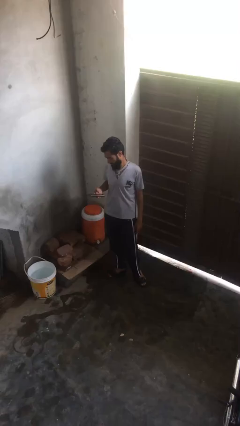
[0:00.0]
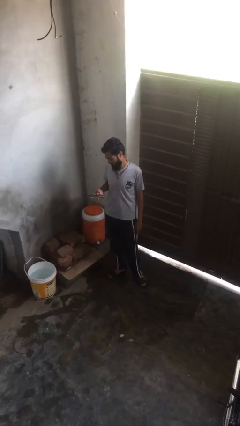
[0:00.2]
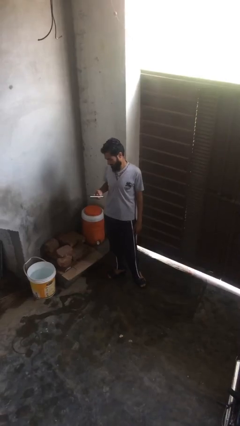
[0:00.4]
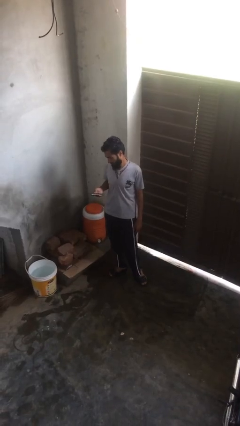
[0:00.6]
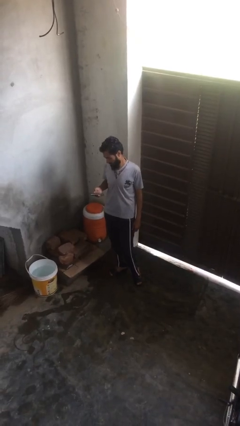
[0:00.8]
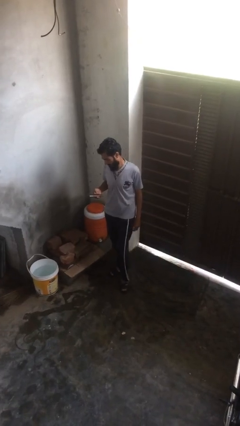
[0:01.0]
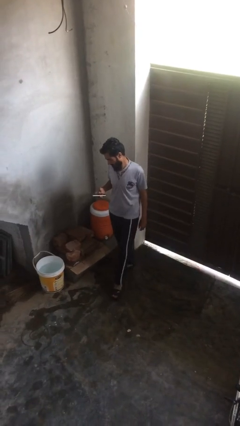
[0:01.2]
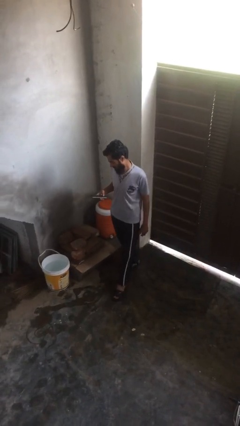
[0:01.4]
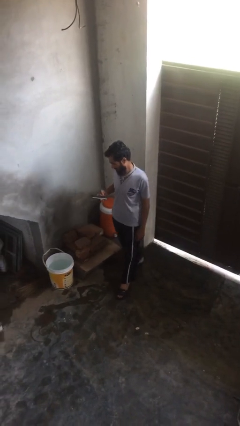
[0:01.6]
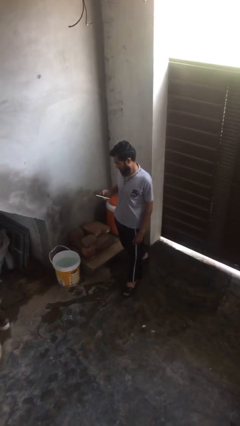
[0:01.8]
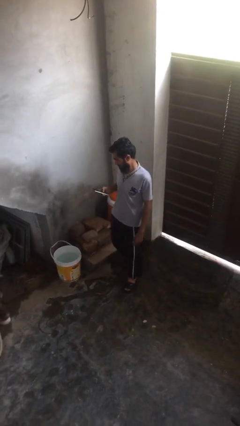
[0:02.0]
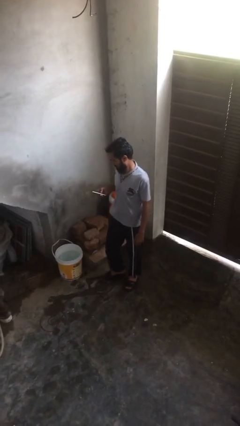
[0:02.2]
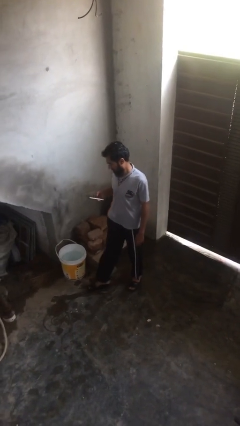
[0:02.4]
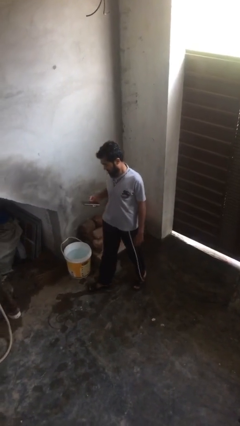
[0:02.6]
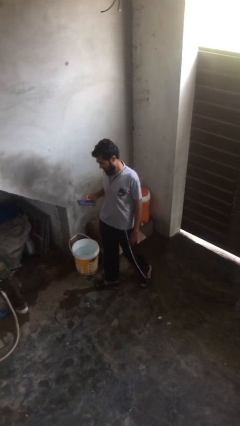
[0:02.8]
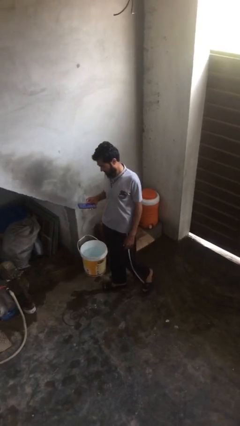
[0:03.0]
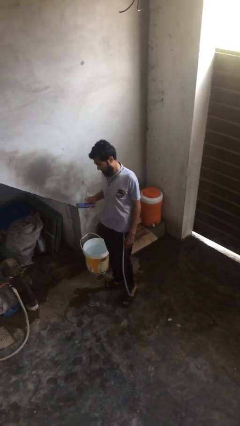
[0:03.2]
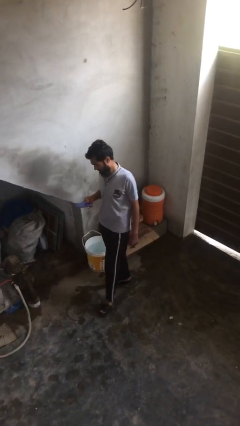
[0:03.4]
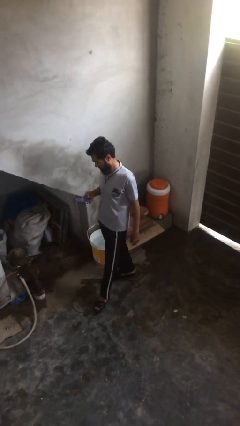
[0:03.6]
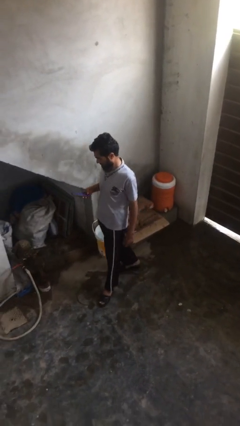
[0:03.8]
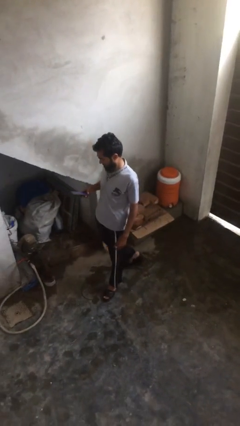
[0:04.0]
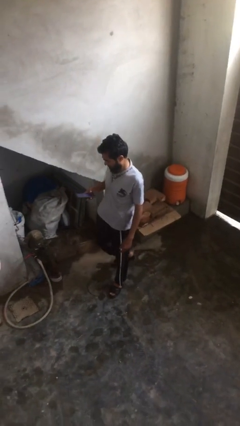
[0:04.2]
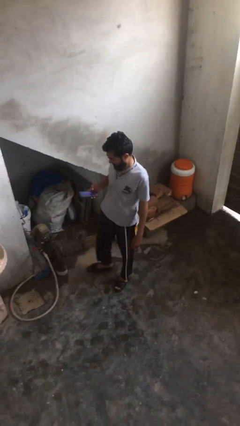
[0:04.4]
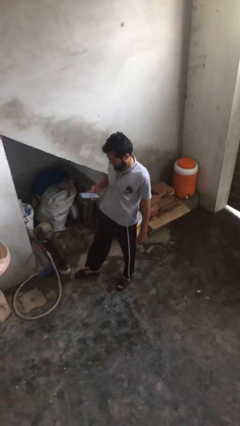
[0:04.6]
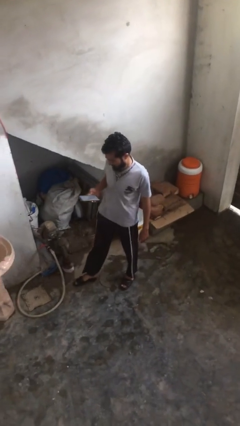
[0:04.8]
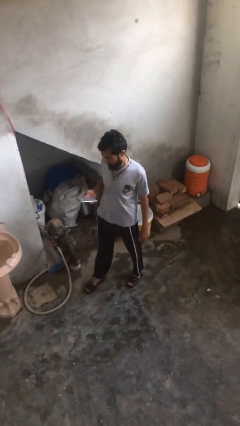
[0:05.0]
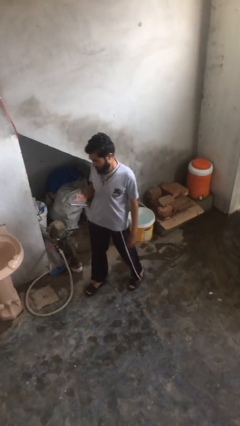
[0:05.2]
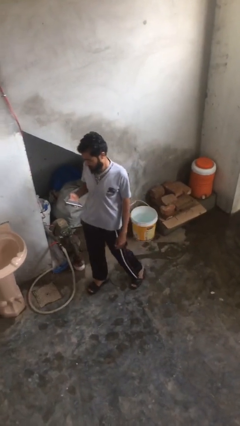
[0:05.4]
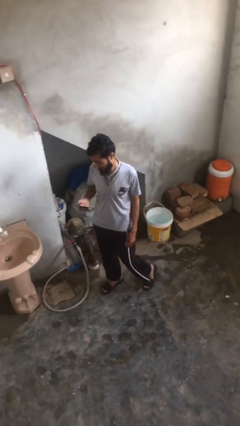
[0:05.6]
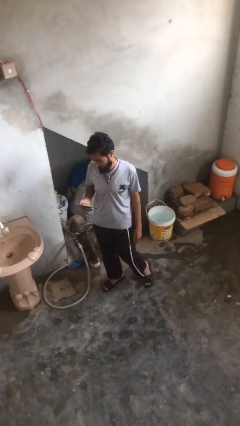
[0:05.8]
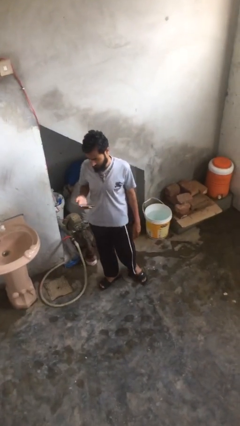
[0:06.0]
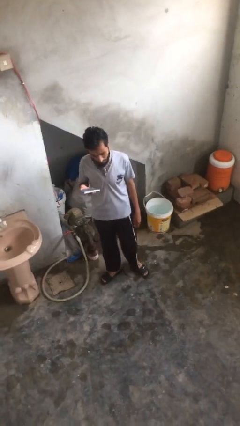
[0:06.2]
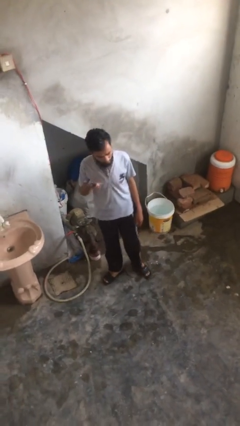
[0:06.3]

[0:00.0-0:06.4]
person texts on phone

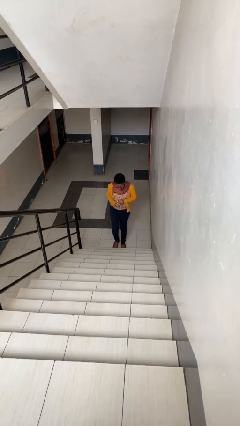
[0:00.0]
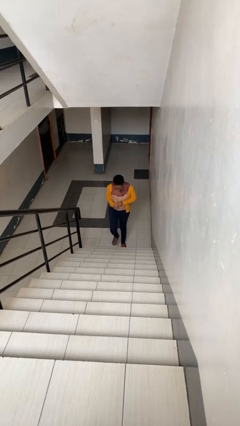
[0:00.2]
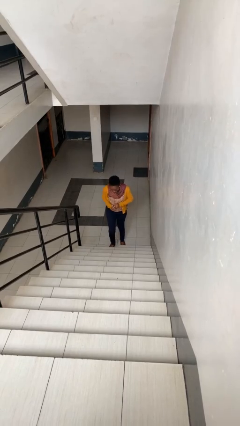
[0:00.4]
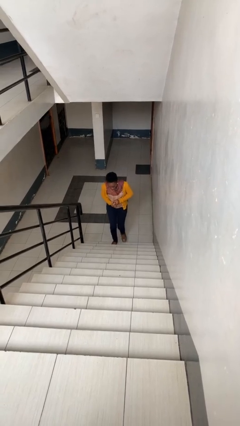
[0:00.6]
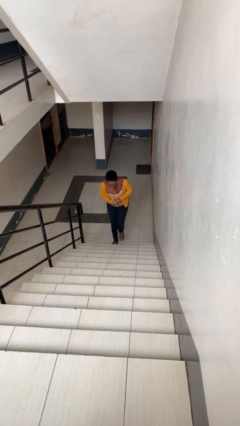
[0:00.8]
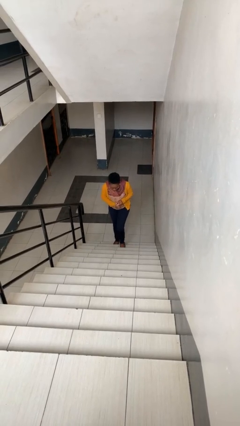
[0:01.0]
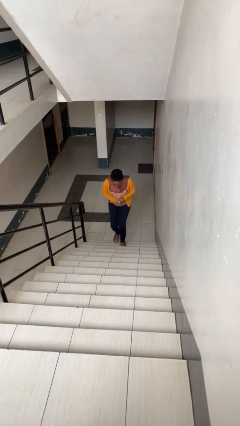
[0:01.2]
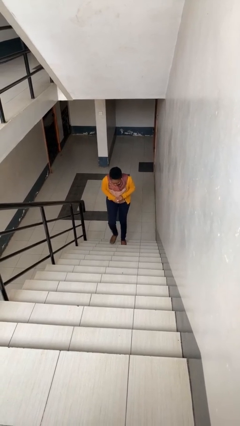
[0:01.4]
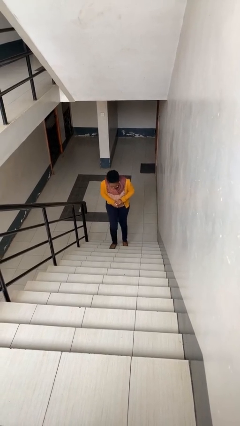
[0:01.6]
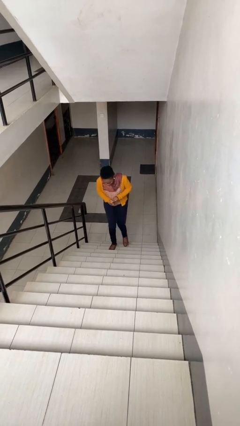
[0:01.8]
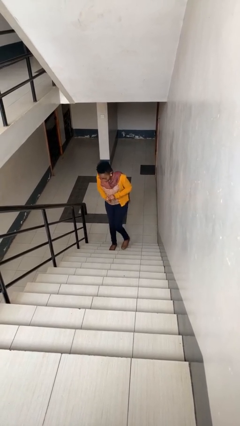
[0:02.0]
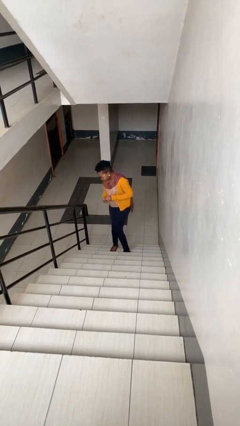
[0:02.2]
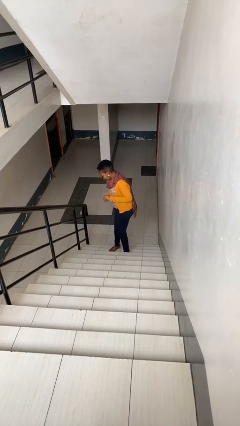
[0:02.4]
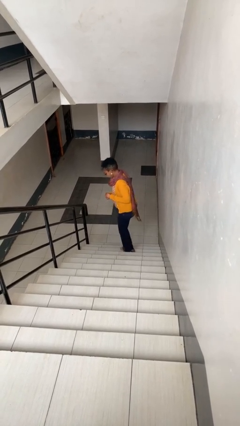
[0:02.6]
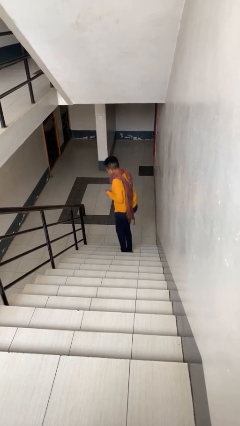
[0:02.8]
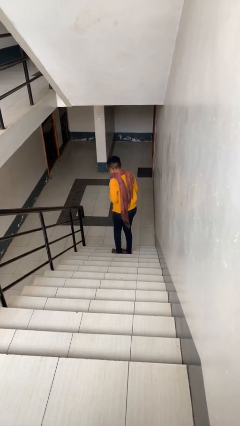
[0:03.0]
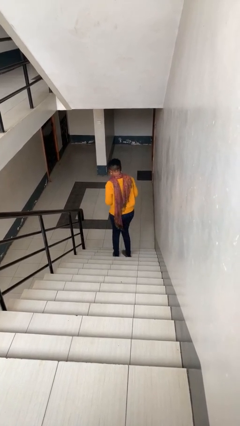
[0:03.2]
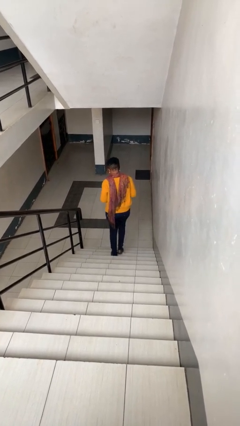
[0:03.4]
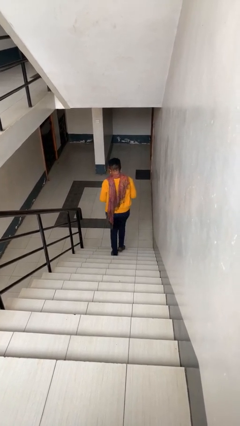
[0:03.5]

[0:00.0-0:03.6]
person climbs up stairs

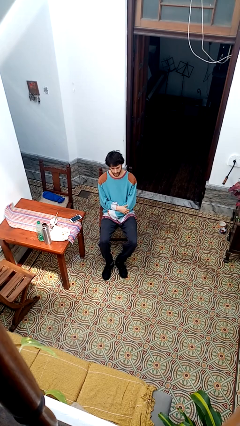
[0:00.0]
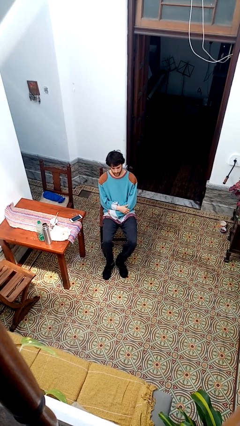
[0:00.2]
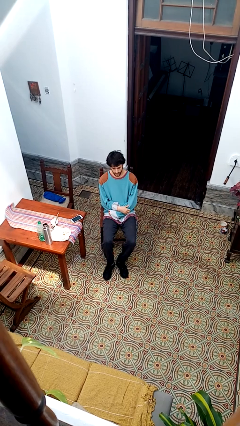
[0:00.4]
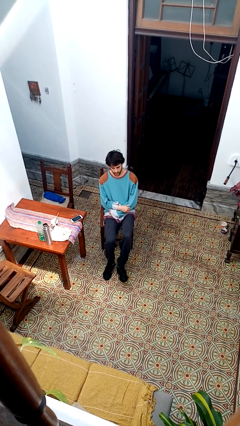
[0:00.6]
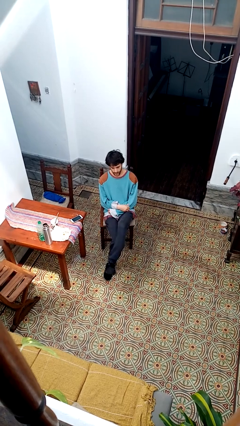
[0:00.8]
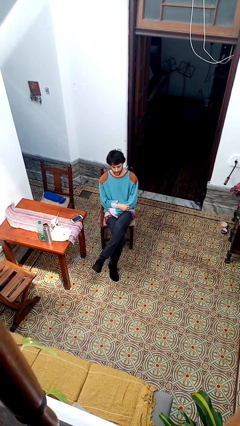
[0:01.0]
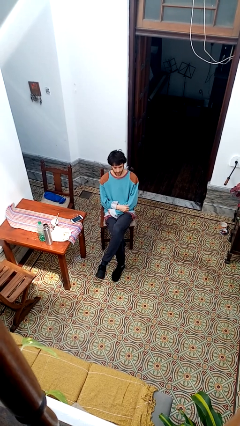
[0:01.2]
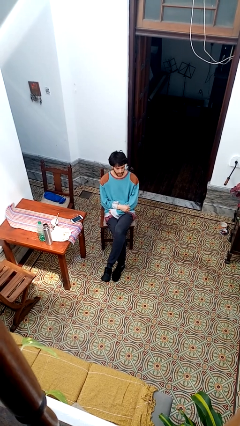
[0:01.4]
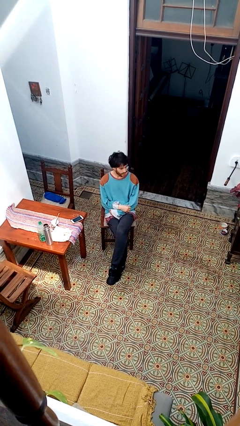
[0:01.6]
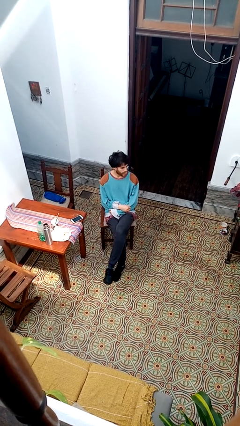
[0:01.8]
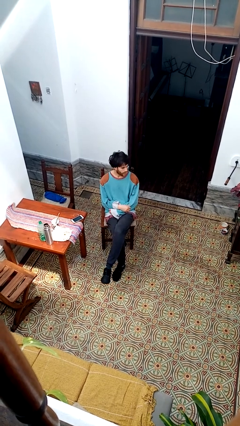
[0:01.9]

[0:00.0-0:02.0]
person crosses legs

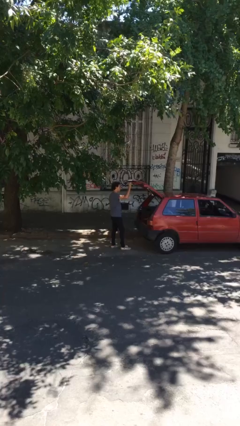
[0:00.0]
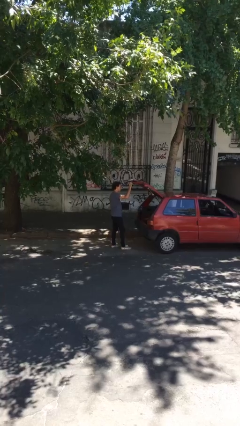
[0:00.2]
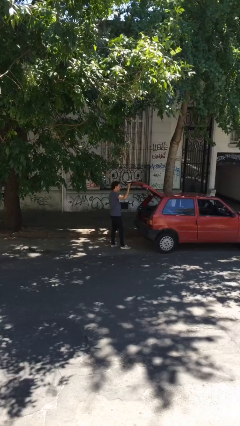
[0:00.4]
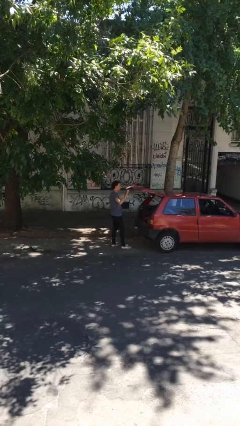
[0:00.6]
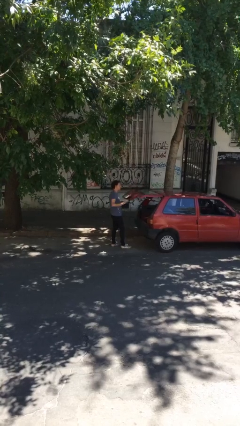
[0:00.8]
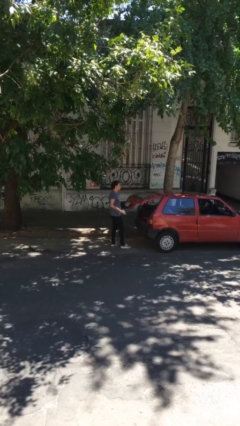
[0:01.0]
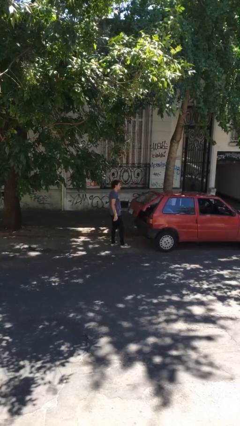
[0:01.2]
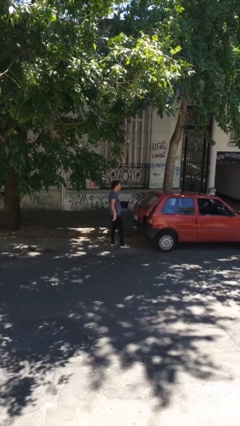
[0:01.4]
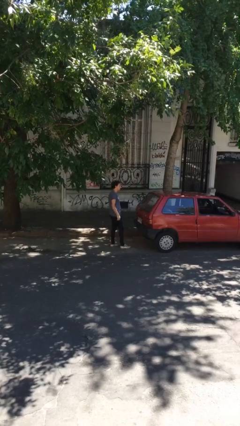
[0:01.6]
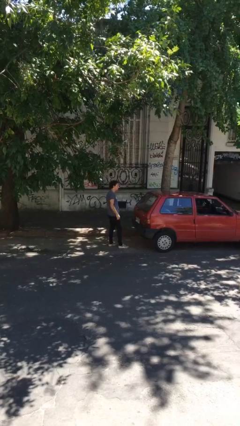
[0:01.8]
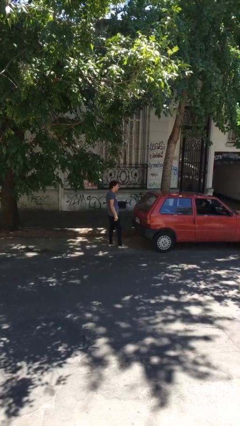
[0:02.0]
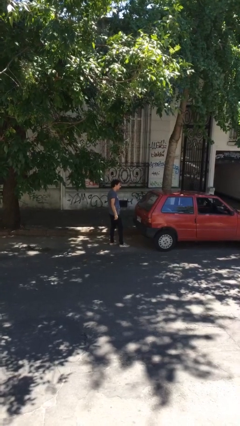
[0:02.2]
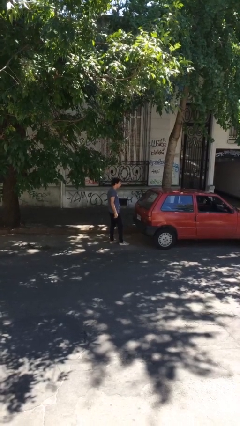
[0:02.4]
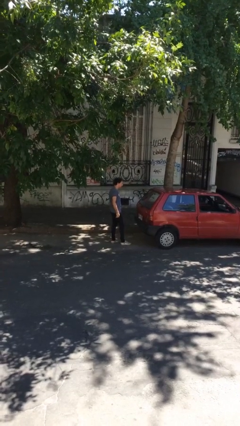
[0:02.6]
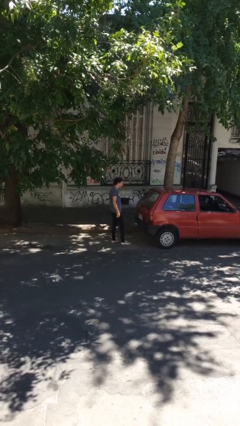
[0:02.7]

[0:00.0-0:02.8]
person closes car trunk

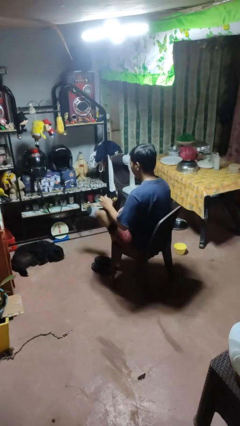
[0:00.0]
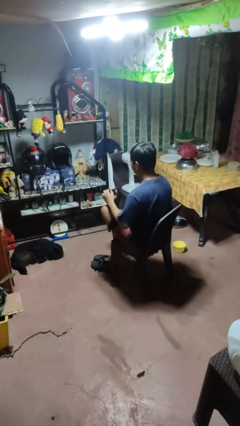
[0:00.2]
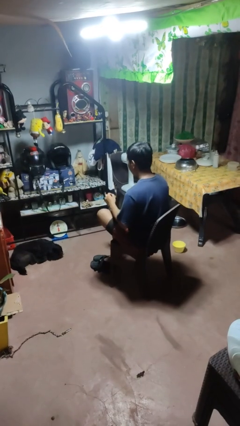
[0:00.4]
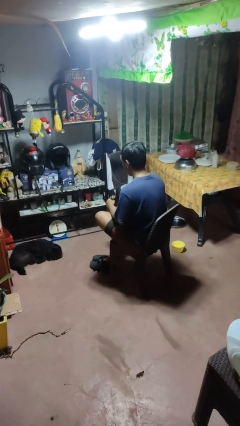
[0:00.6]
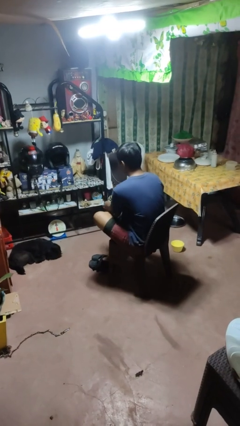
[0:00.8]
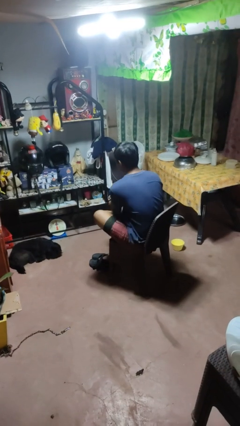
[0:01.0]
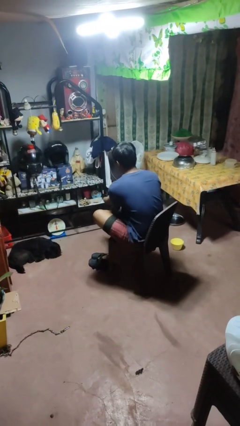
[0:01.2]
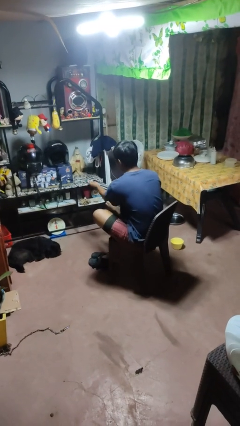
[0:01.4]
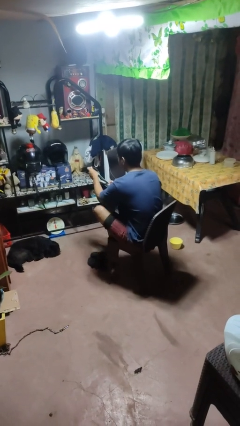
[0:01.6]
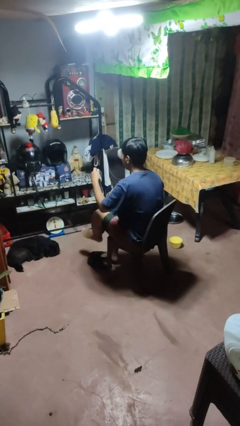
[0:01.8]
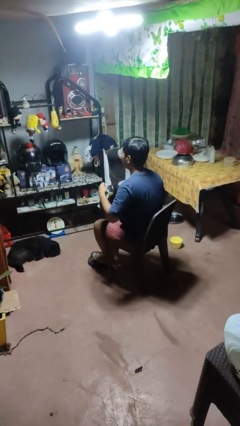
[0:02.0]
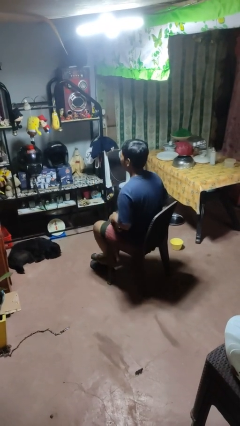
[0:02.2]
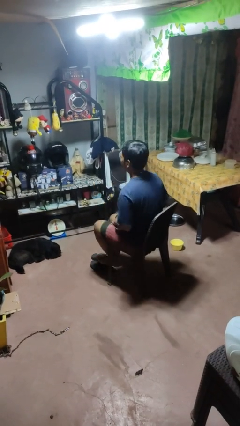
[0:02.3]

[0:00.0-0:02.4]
person takes off socks

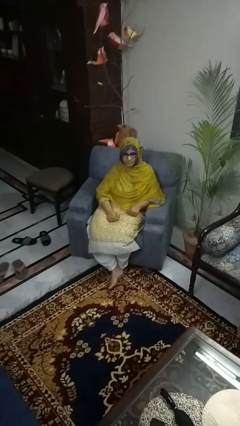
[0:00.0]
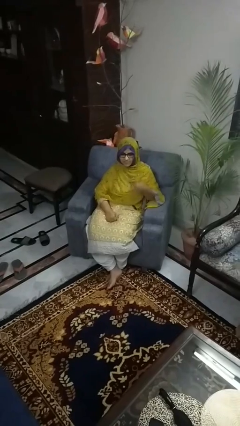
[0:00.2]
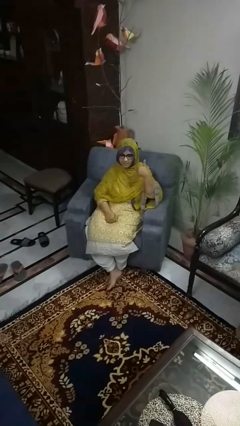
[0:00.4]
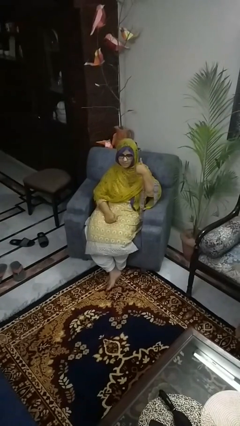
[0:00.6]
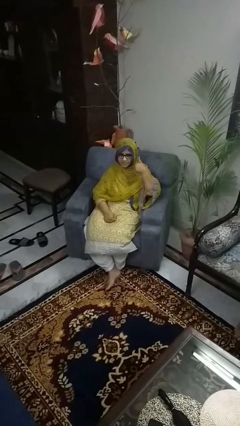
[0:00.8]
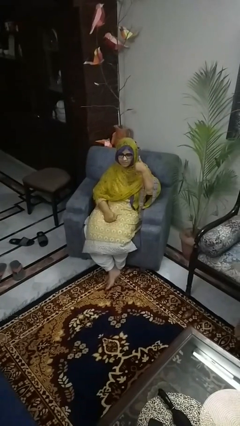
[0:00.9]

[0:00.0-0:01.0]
person gestures call me
